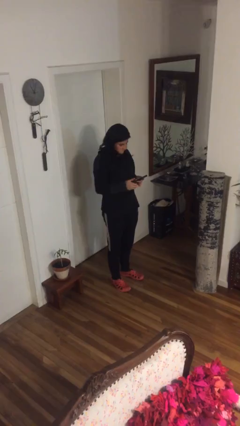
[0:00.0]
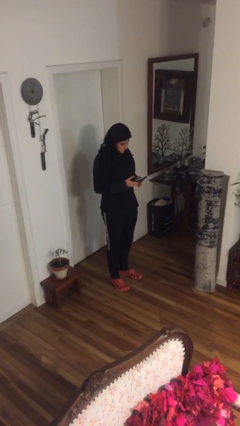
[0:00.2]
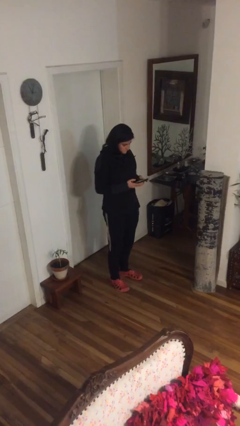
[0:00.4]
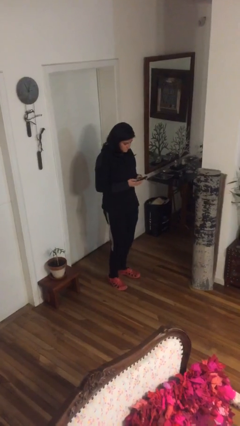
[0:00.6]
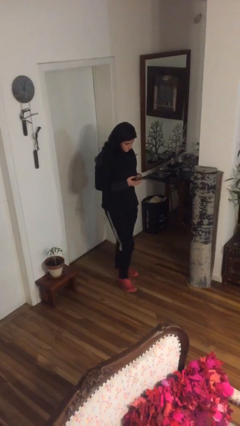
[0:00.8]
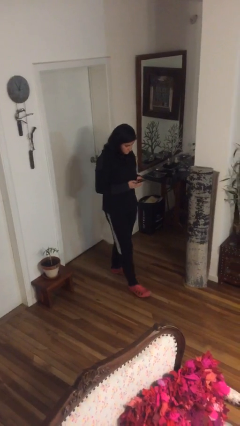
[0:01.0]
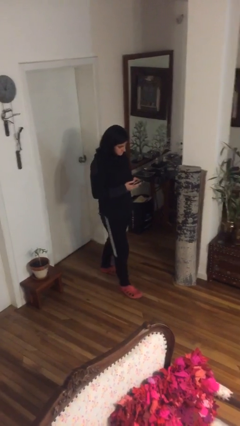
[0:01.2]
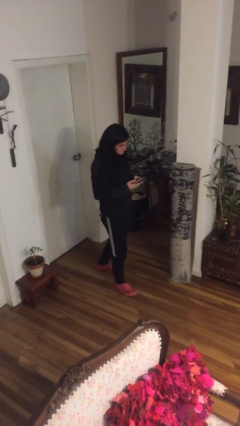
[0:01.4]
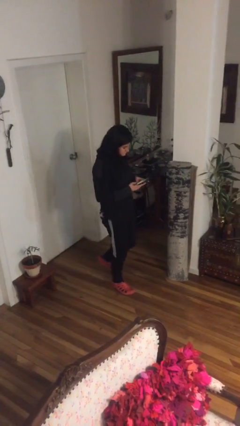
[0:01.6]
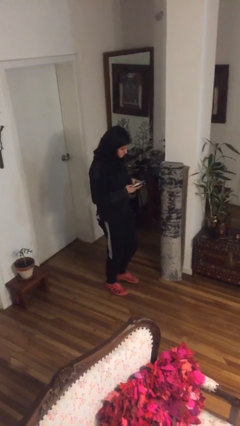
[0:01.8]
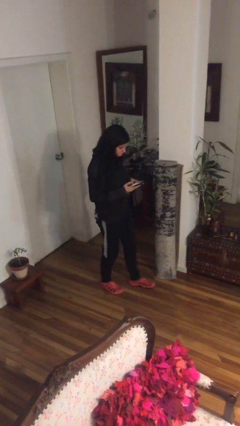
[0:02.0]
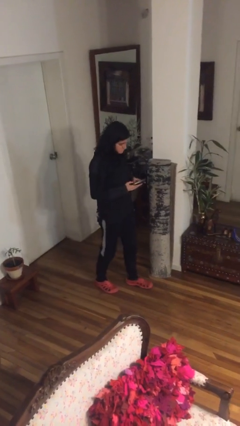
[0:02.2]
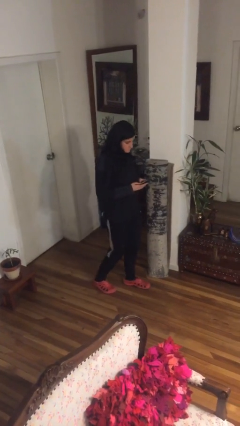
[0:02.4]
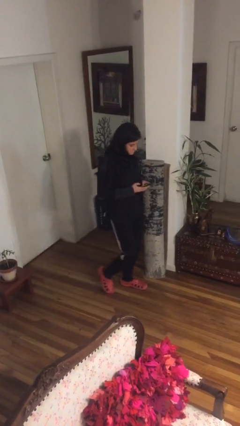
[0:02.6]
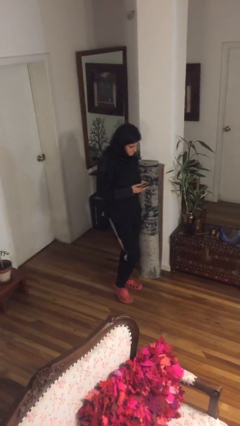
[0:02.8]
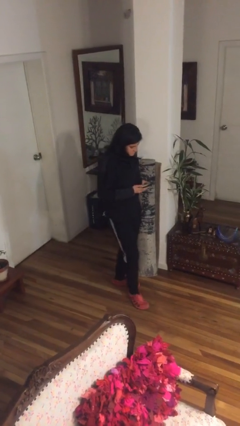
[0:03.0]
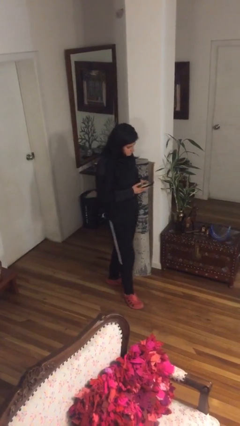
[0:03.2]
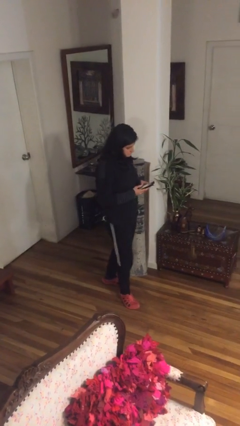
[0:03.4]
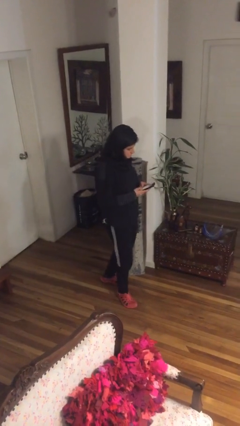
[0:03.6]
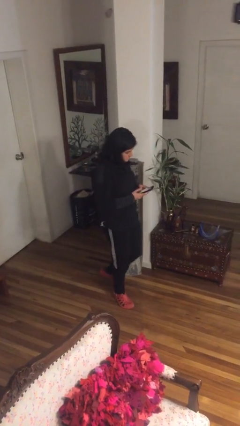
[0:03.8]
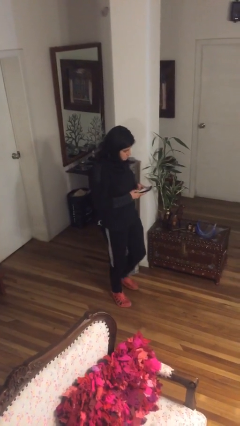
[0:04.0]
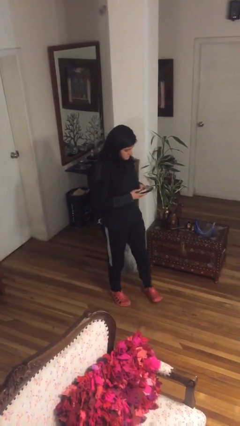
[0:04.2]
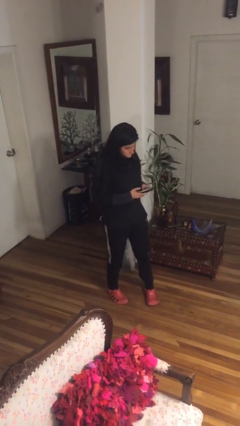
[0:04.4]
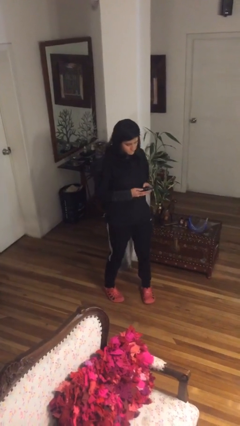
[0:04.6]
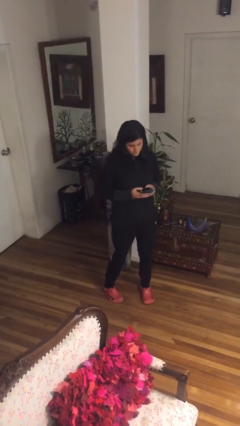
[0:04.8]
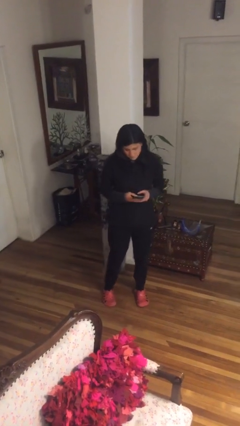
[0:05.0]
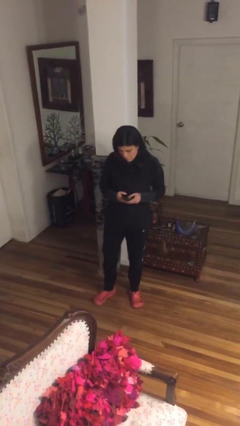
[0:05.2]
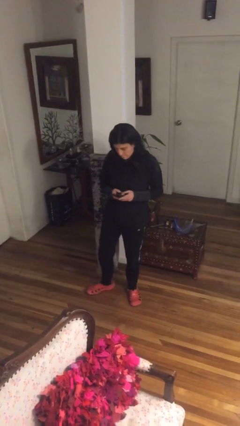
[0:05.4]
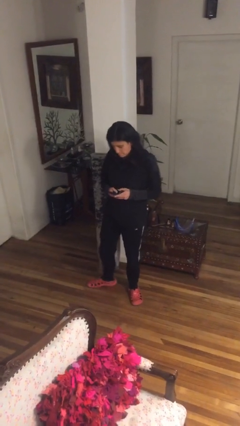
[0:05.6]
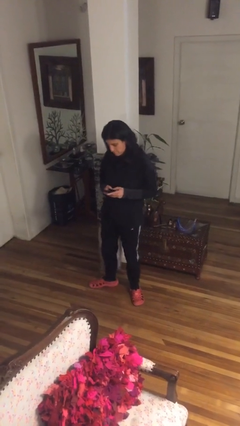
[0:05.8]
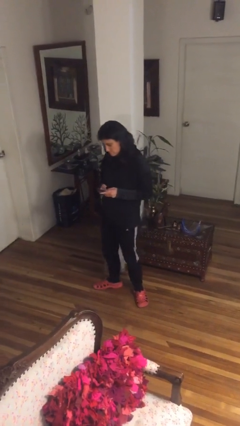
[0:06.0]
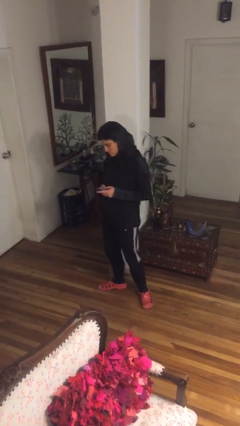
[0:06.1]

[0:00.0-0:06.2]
person texts on phone

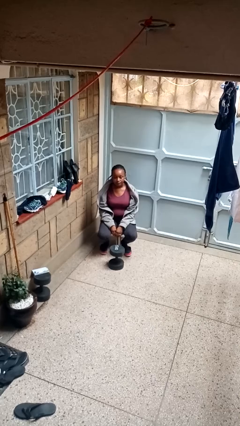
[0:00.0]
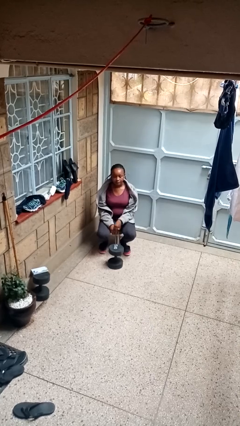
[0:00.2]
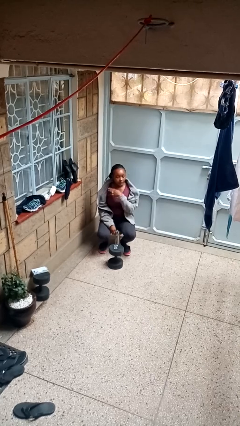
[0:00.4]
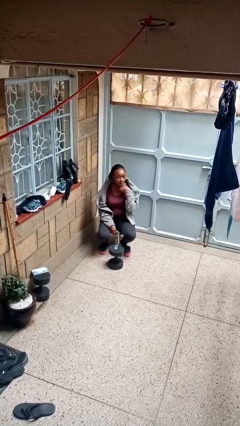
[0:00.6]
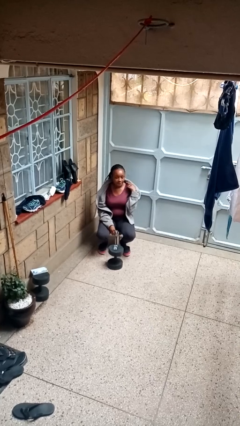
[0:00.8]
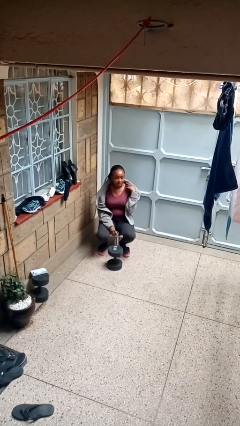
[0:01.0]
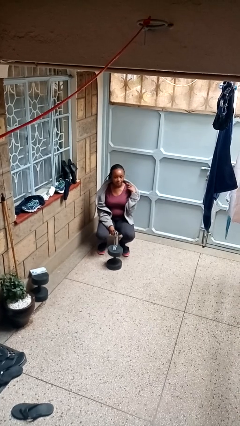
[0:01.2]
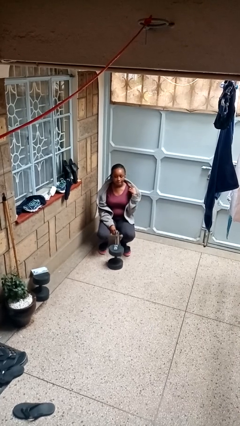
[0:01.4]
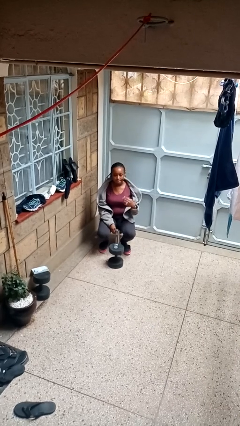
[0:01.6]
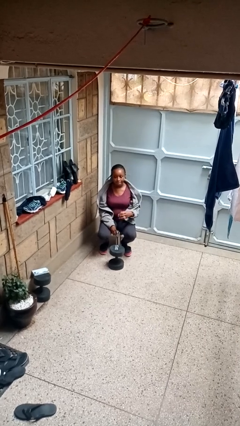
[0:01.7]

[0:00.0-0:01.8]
person gestures cut

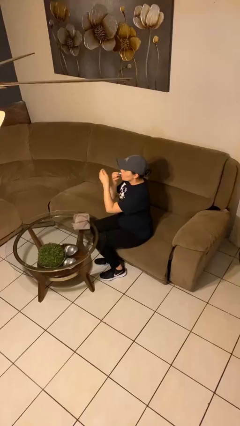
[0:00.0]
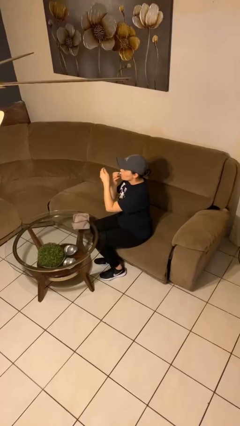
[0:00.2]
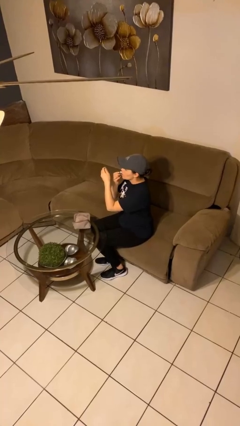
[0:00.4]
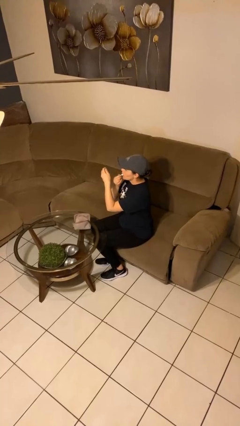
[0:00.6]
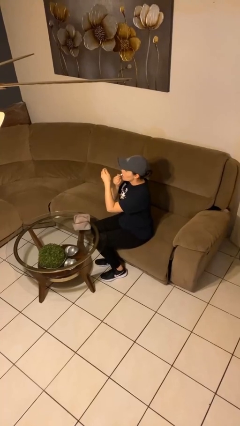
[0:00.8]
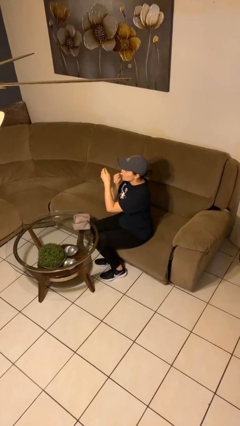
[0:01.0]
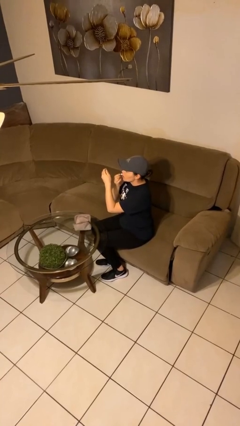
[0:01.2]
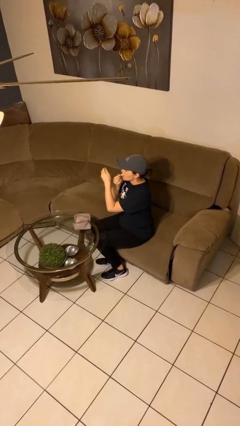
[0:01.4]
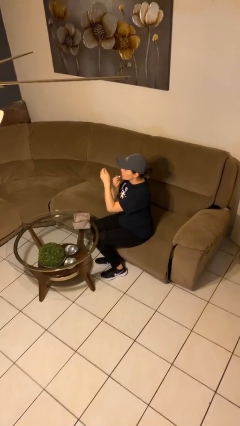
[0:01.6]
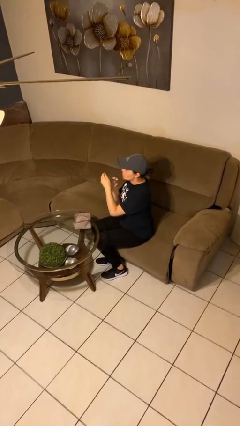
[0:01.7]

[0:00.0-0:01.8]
person applies lip makeup

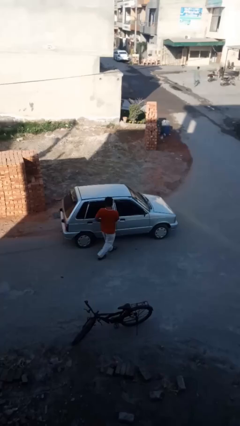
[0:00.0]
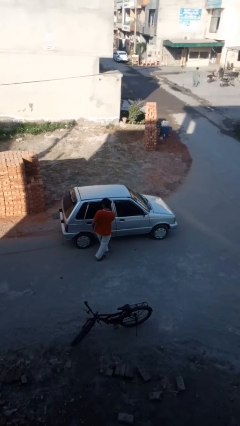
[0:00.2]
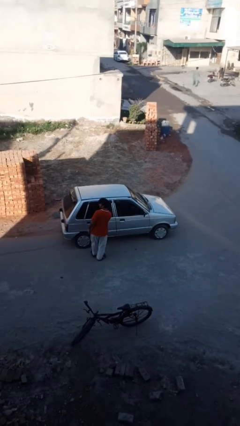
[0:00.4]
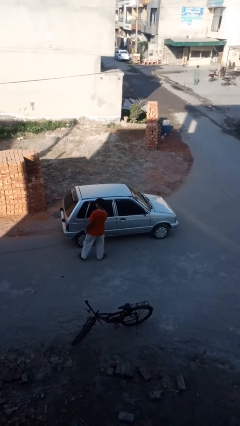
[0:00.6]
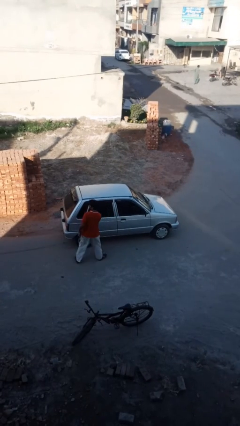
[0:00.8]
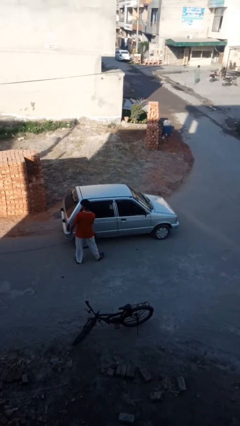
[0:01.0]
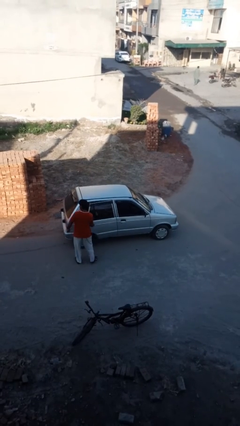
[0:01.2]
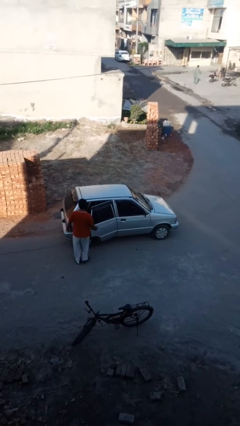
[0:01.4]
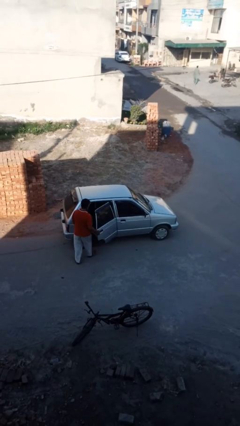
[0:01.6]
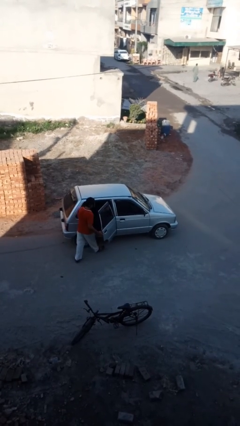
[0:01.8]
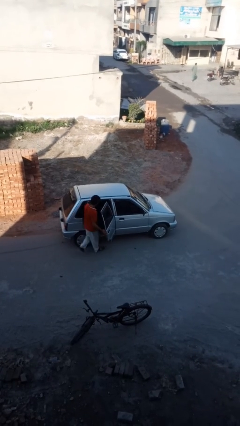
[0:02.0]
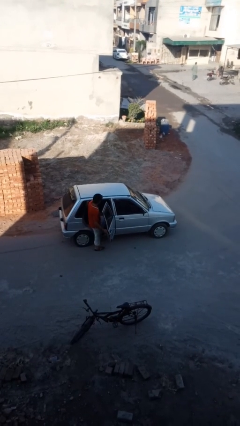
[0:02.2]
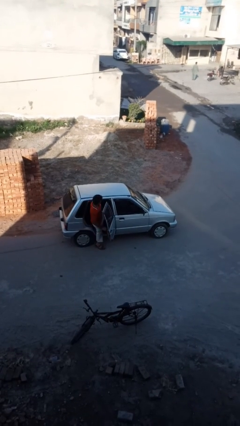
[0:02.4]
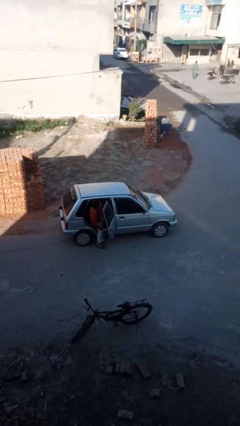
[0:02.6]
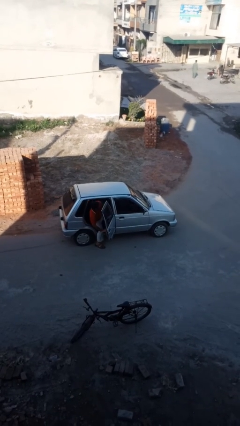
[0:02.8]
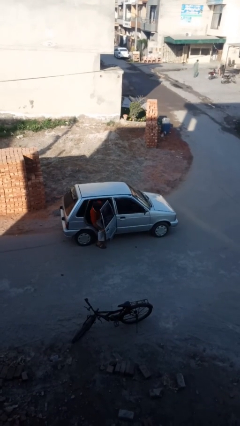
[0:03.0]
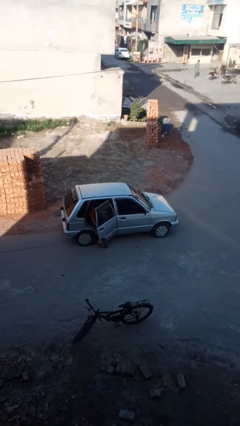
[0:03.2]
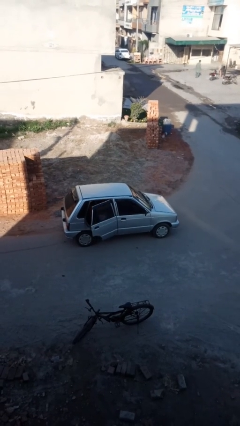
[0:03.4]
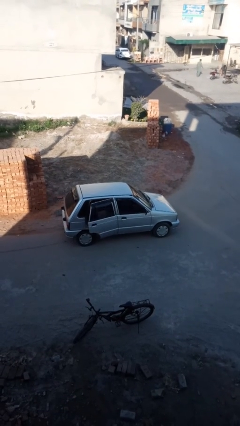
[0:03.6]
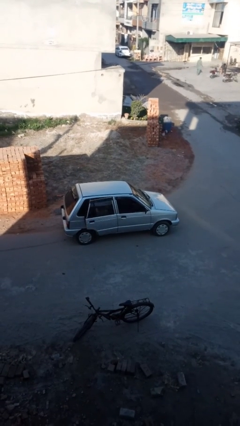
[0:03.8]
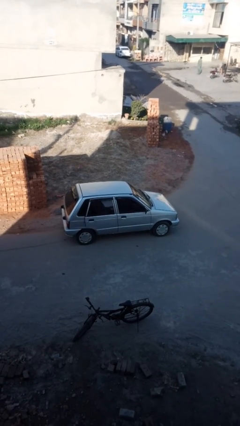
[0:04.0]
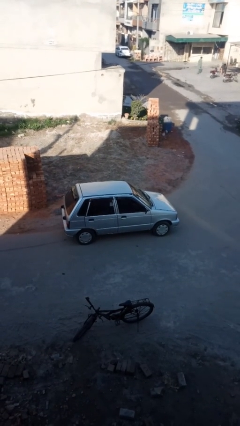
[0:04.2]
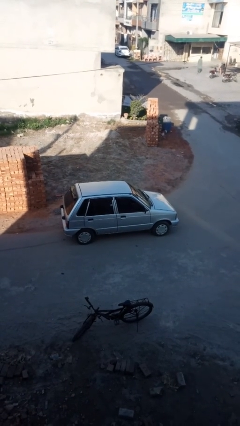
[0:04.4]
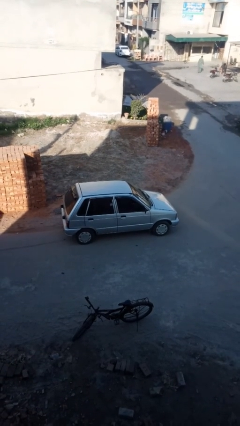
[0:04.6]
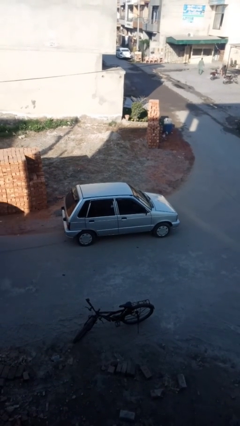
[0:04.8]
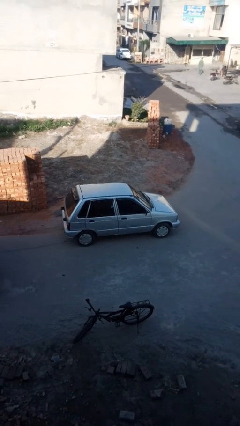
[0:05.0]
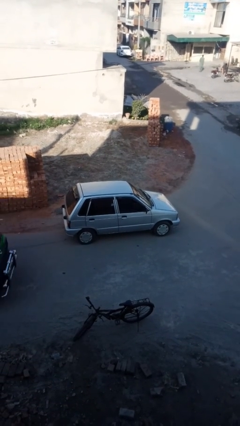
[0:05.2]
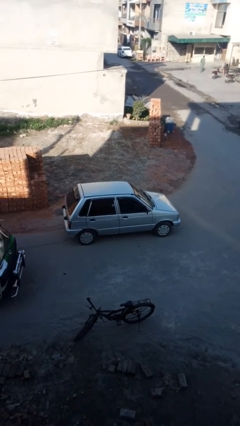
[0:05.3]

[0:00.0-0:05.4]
car picks up person

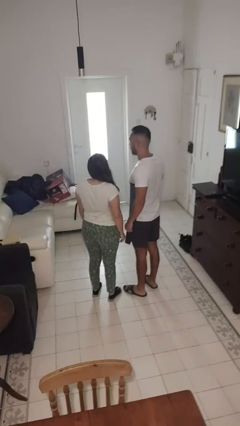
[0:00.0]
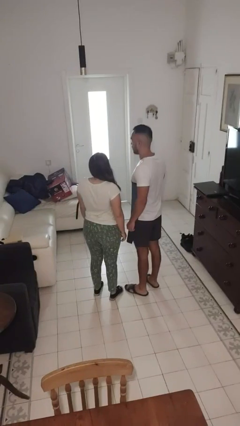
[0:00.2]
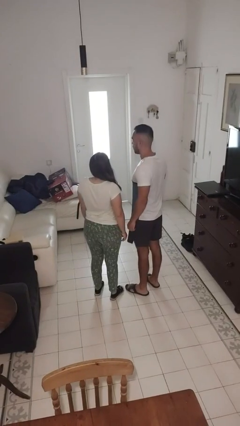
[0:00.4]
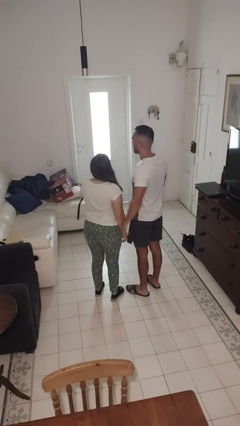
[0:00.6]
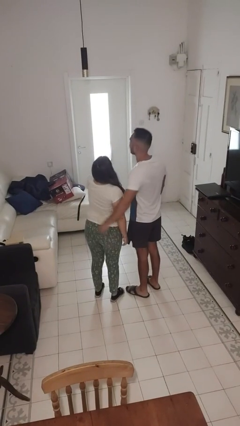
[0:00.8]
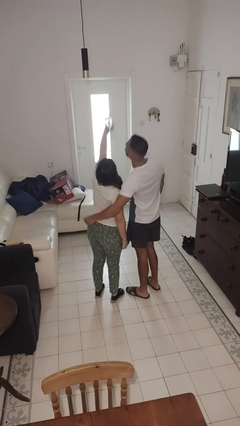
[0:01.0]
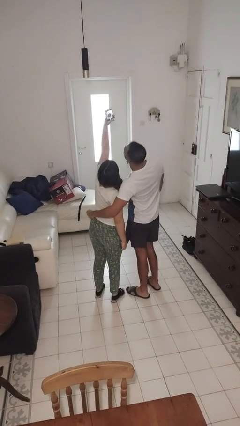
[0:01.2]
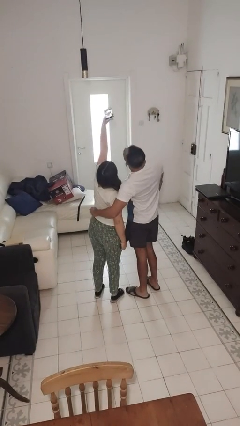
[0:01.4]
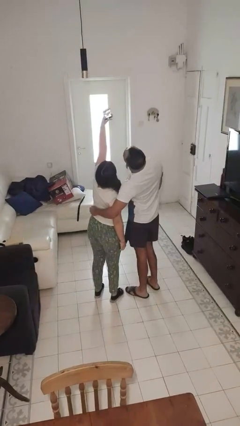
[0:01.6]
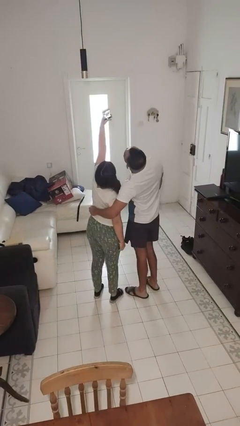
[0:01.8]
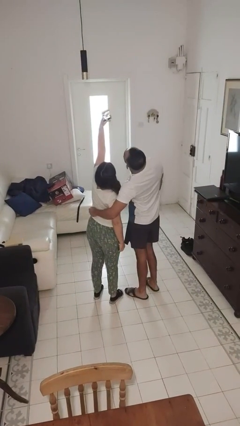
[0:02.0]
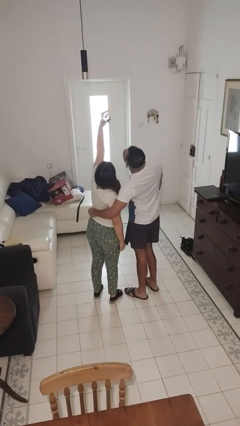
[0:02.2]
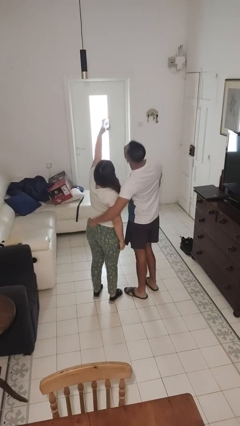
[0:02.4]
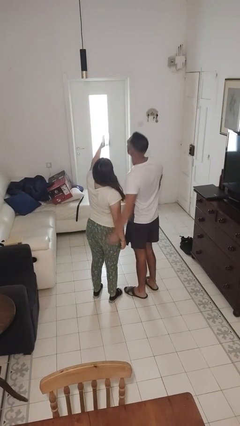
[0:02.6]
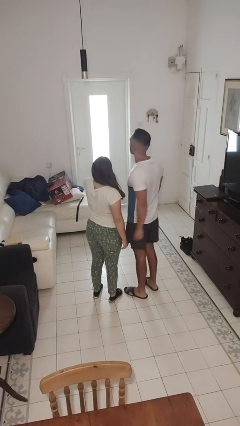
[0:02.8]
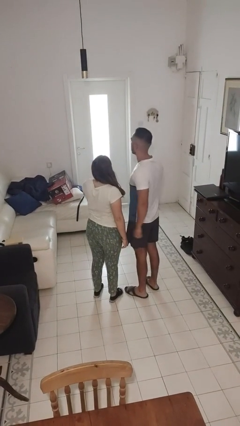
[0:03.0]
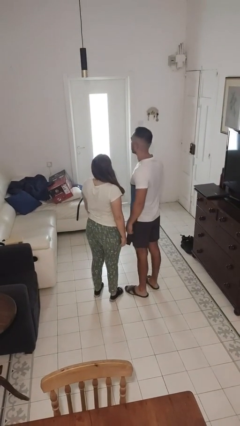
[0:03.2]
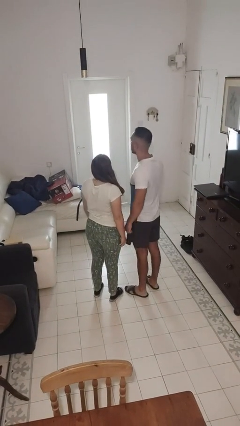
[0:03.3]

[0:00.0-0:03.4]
person takes selfie with person
